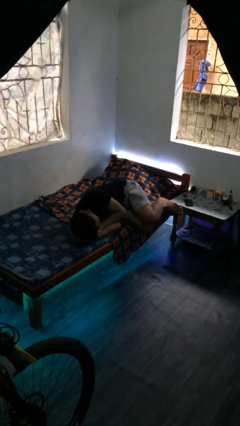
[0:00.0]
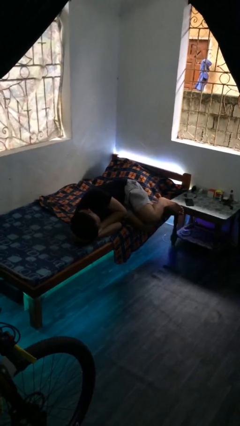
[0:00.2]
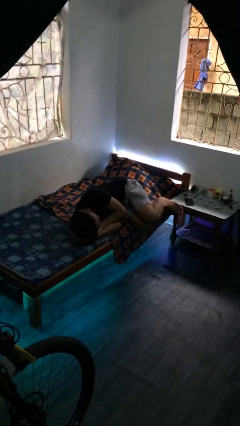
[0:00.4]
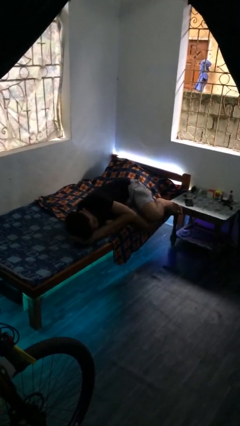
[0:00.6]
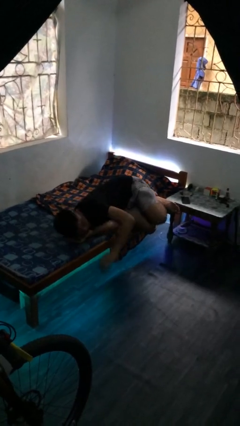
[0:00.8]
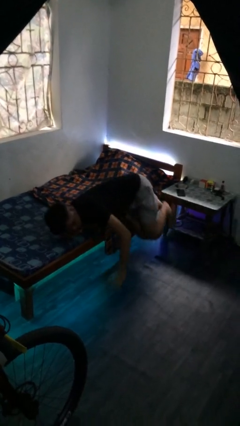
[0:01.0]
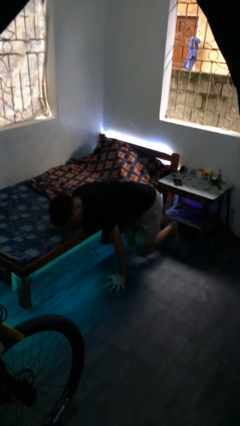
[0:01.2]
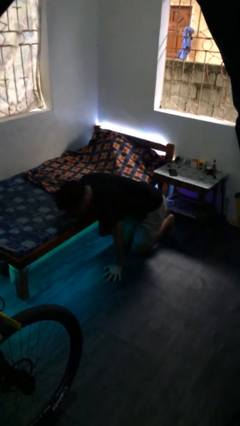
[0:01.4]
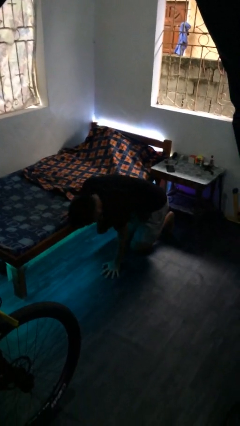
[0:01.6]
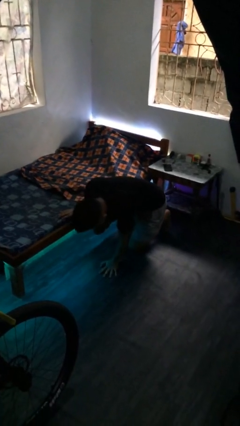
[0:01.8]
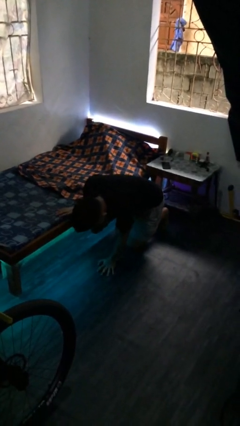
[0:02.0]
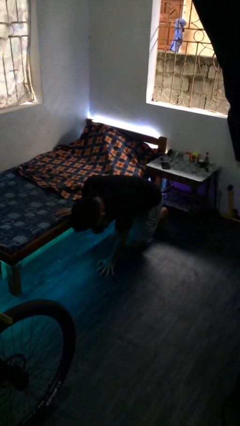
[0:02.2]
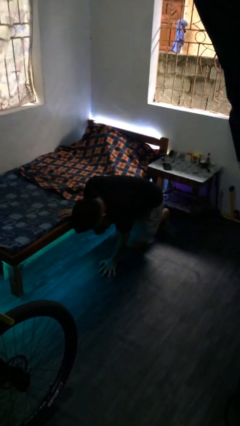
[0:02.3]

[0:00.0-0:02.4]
person falls from bed

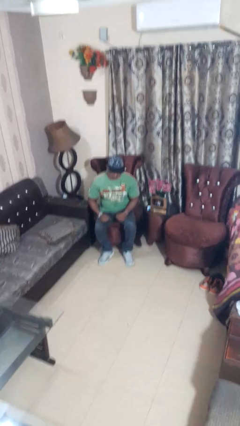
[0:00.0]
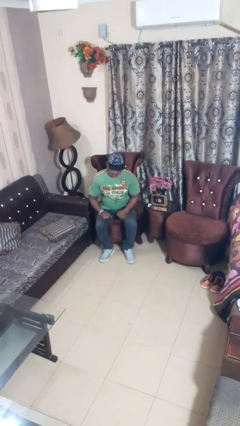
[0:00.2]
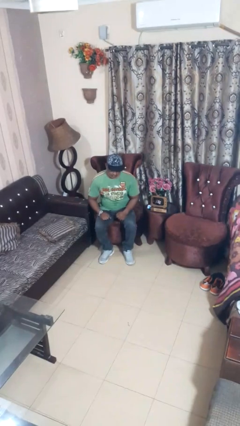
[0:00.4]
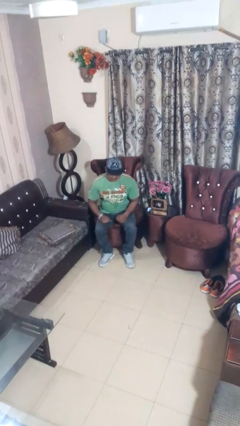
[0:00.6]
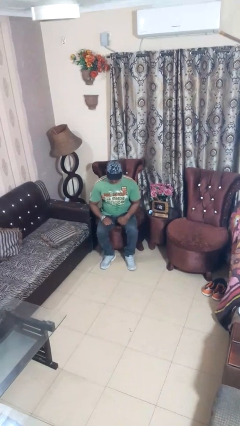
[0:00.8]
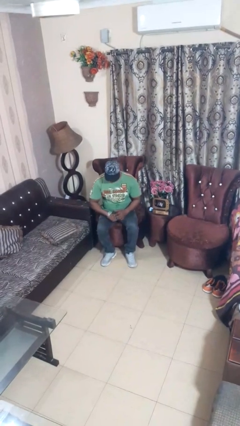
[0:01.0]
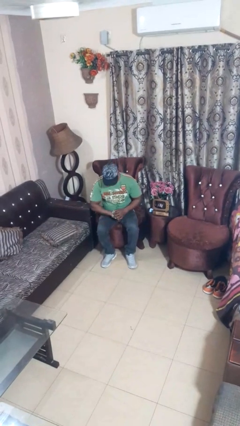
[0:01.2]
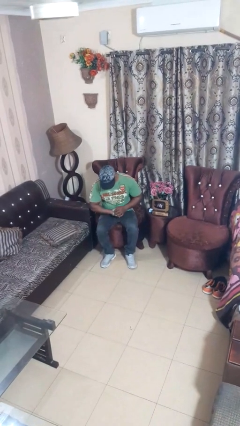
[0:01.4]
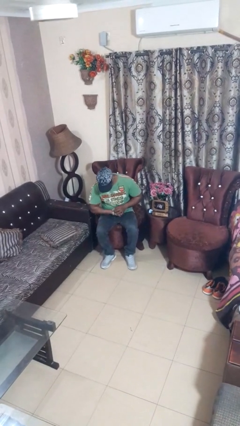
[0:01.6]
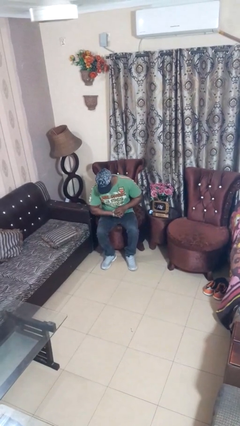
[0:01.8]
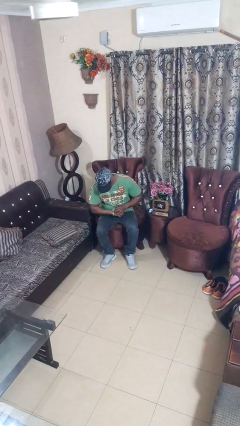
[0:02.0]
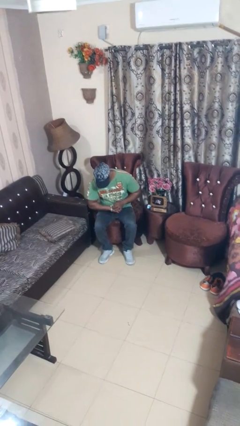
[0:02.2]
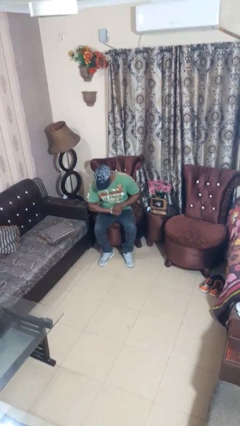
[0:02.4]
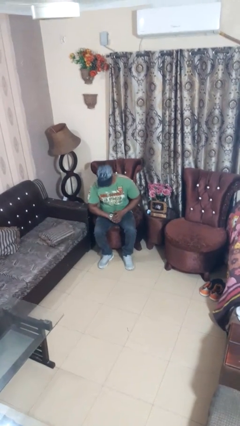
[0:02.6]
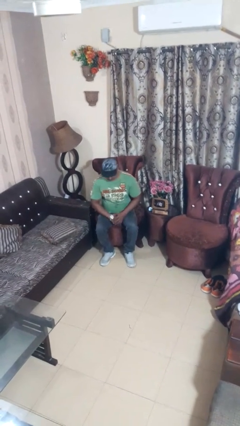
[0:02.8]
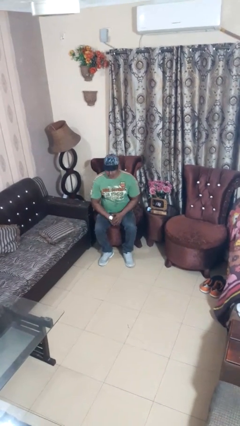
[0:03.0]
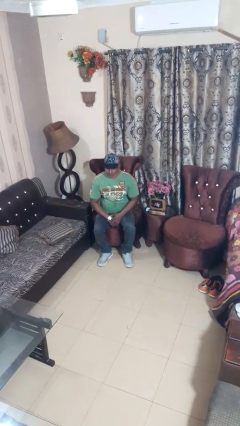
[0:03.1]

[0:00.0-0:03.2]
person looks at wristwatch

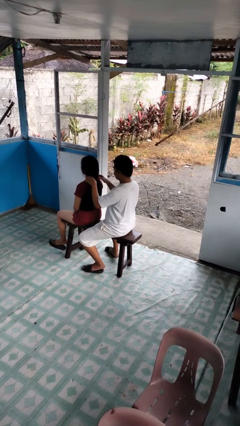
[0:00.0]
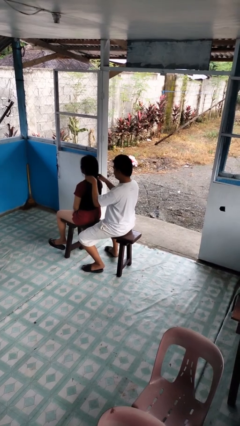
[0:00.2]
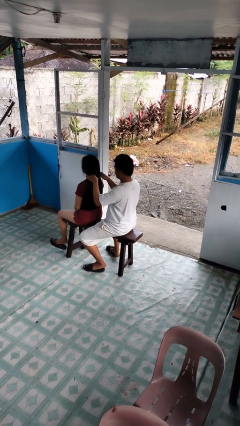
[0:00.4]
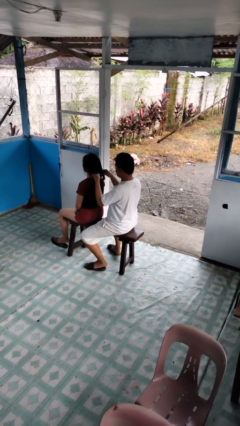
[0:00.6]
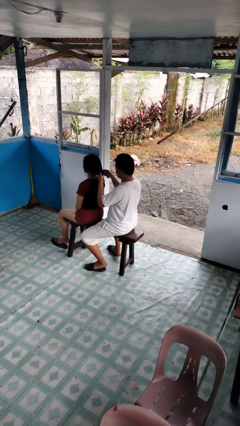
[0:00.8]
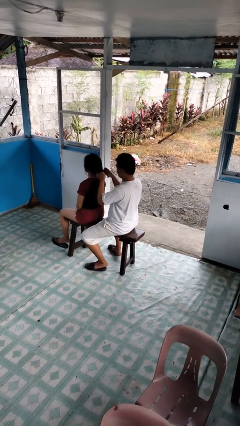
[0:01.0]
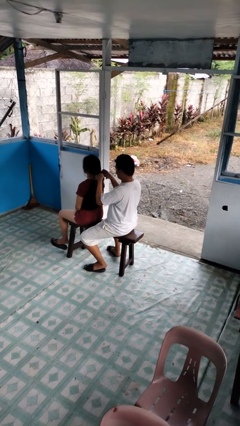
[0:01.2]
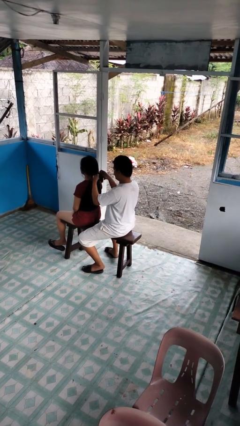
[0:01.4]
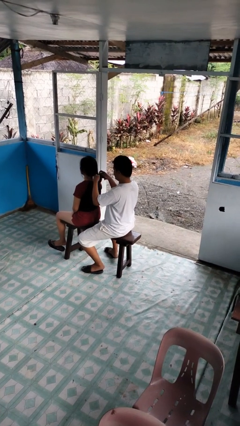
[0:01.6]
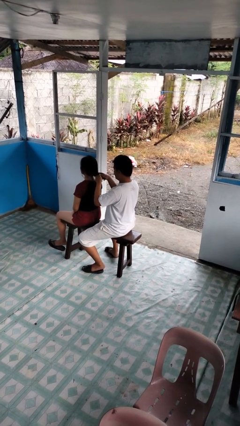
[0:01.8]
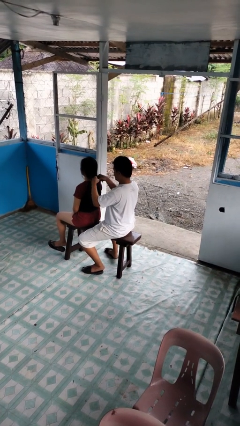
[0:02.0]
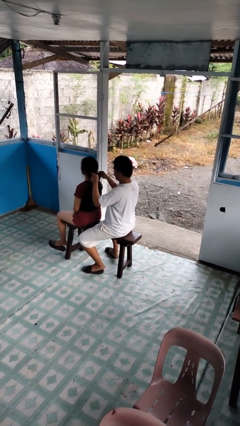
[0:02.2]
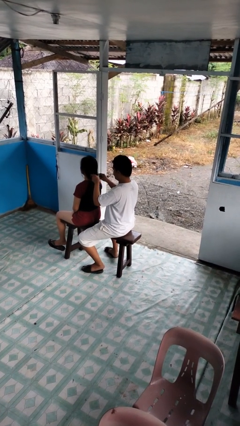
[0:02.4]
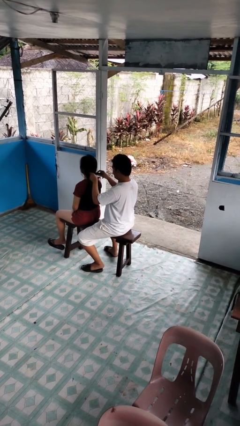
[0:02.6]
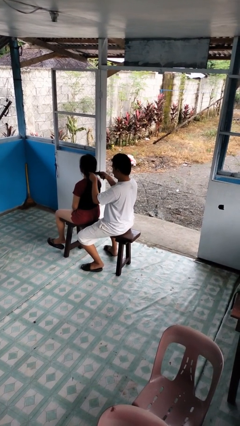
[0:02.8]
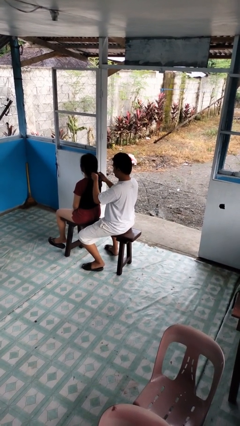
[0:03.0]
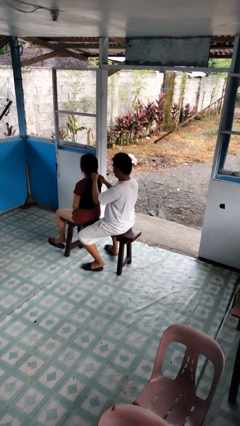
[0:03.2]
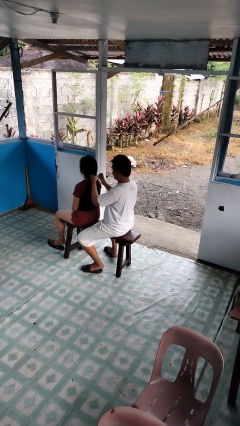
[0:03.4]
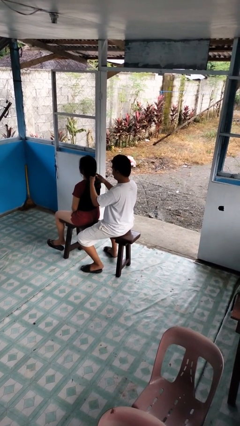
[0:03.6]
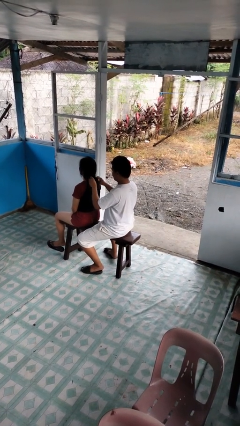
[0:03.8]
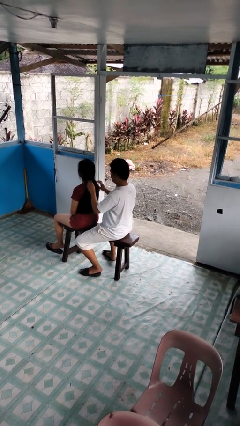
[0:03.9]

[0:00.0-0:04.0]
person braids hair of person

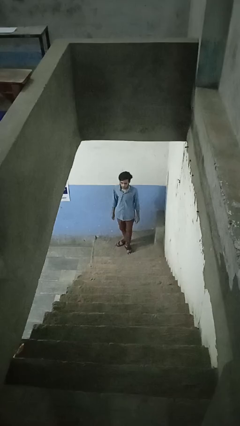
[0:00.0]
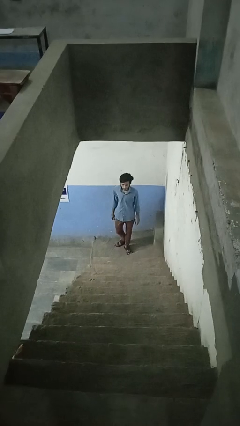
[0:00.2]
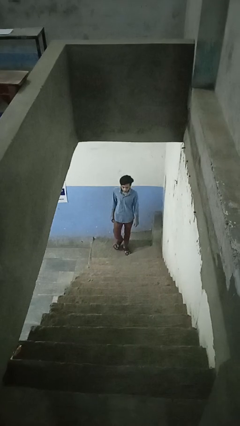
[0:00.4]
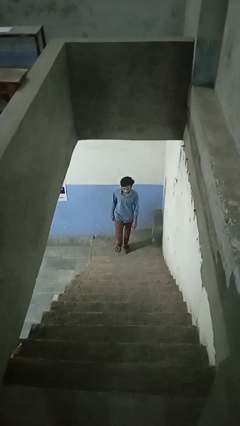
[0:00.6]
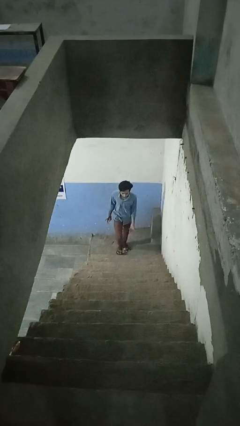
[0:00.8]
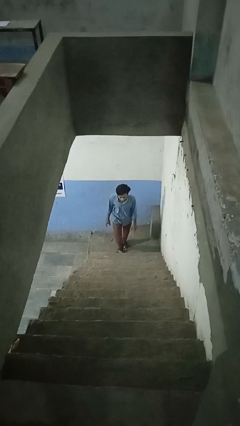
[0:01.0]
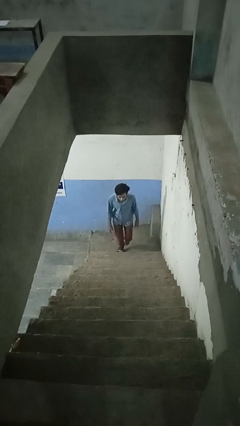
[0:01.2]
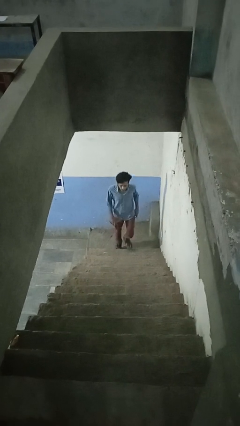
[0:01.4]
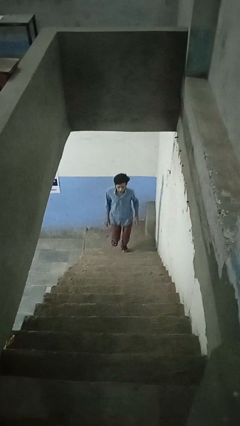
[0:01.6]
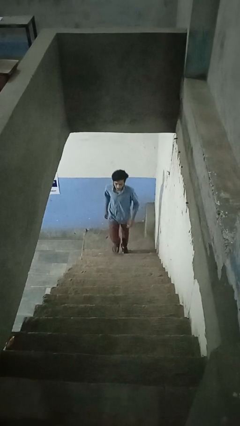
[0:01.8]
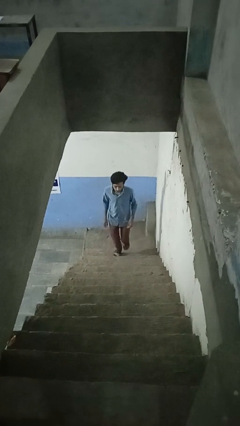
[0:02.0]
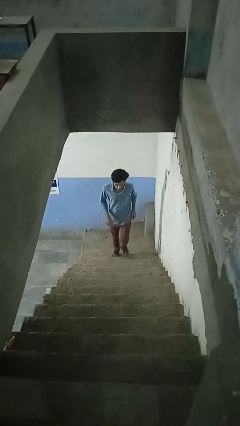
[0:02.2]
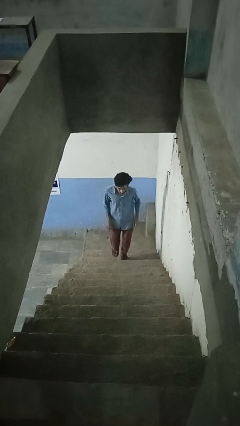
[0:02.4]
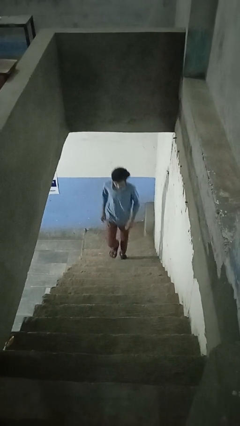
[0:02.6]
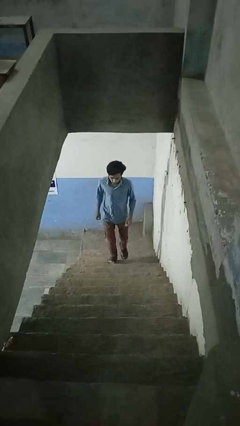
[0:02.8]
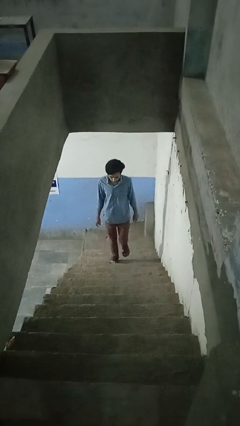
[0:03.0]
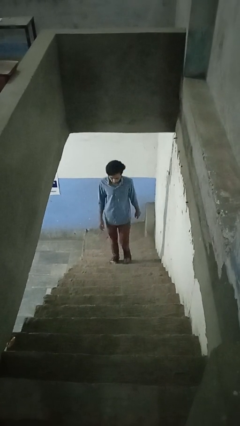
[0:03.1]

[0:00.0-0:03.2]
person climbs up stairs

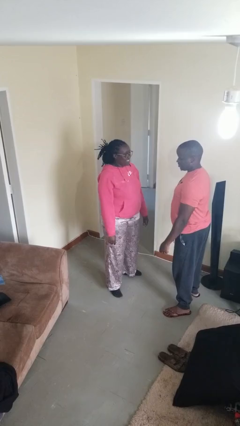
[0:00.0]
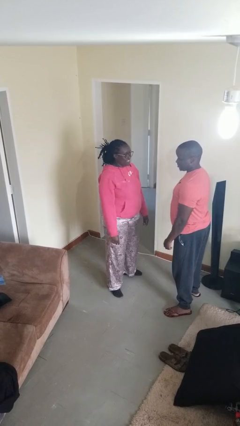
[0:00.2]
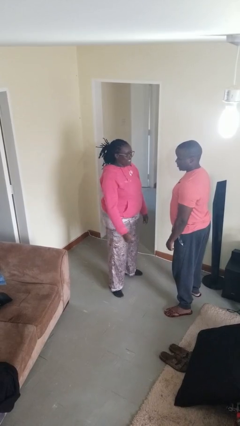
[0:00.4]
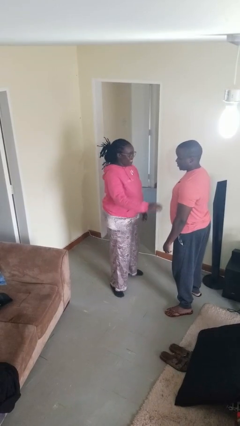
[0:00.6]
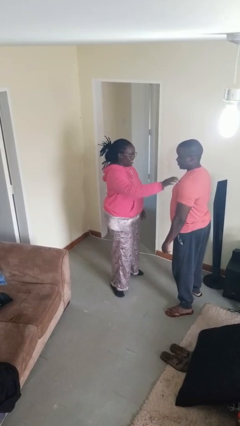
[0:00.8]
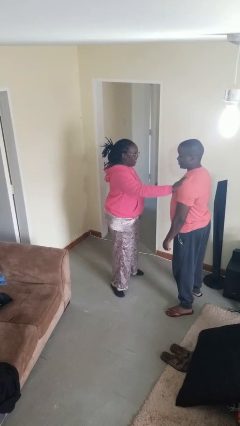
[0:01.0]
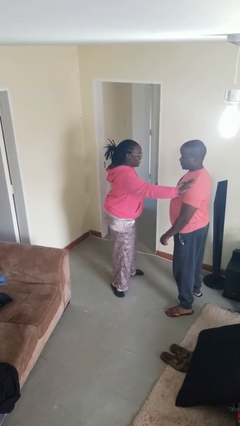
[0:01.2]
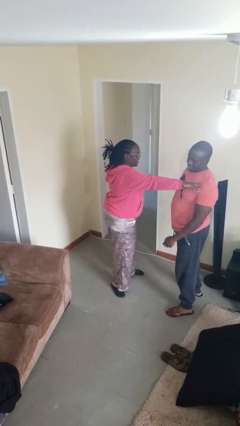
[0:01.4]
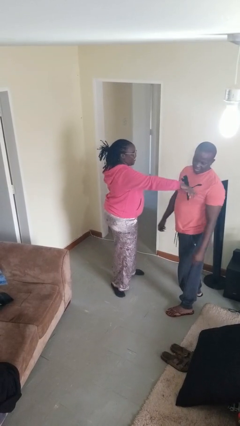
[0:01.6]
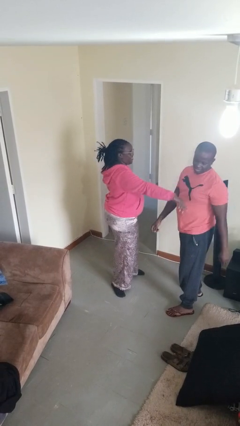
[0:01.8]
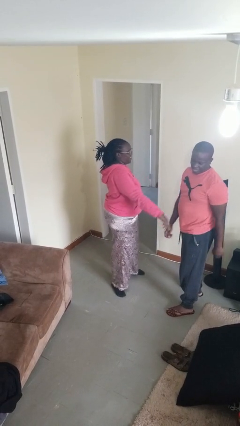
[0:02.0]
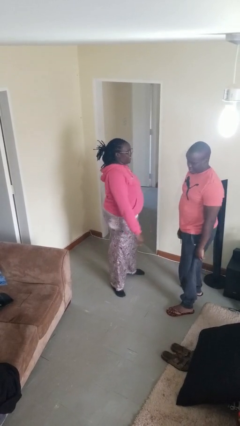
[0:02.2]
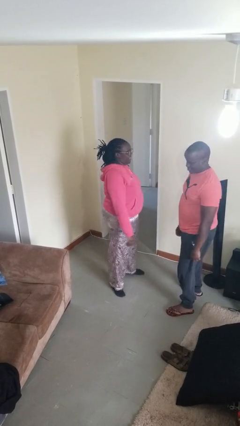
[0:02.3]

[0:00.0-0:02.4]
person shoves person

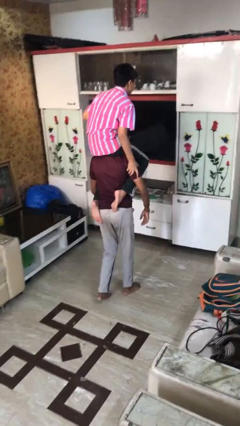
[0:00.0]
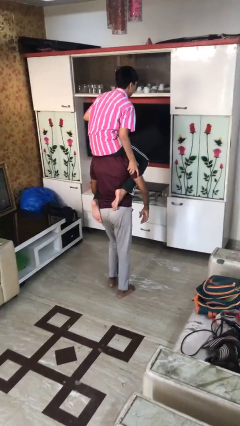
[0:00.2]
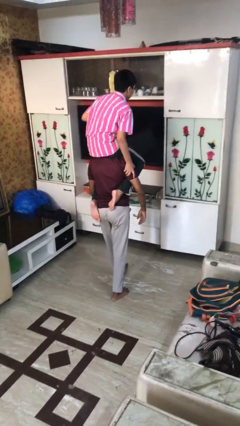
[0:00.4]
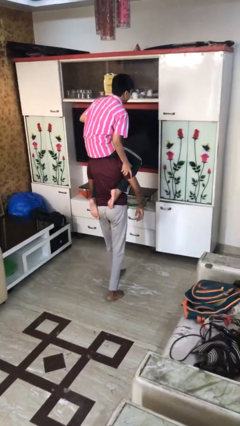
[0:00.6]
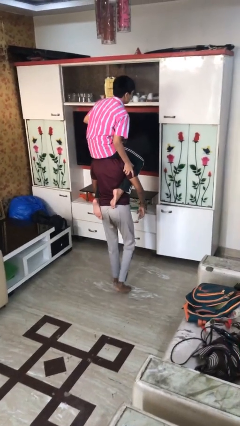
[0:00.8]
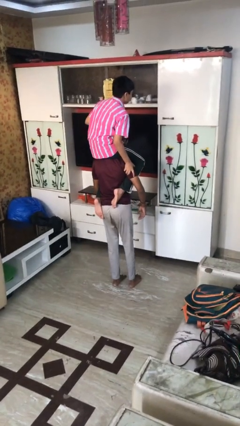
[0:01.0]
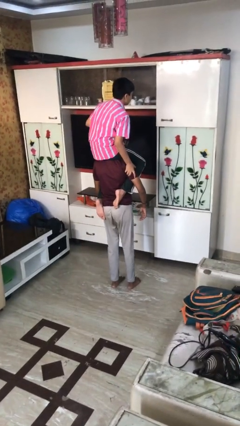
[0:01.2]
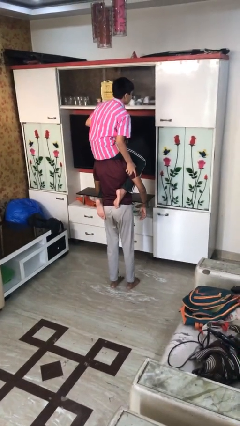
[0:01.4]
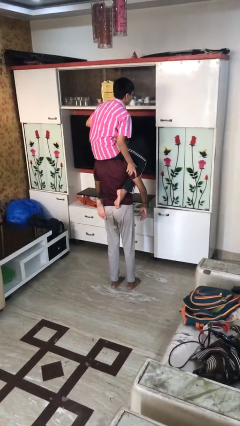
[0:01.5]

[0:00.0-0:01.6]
person carries person on shoulders

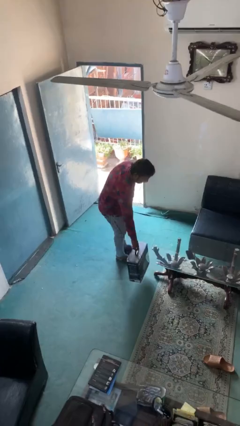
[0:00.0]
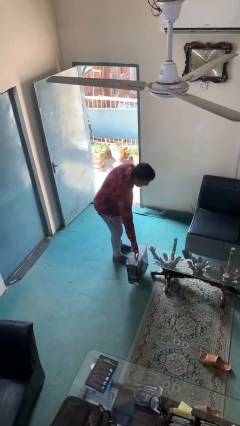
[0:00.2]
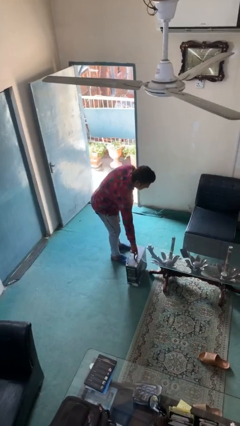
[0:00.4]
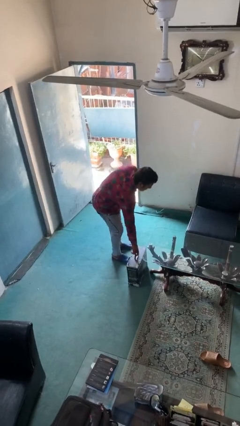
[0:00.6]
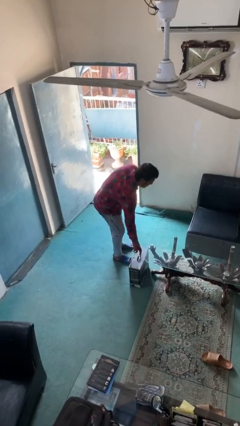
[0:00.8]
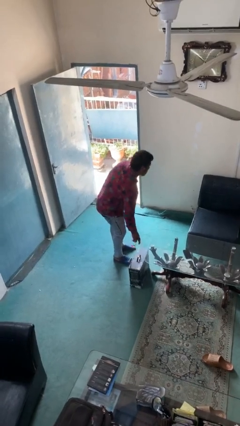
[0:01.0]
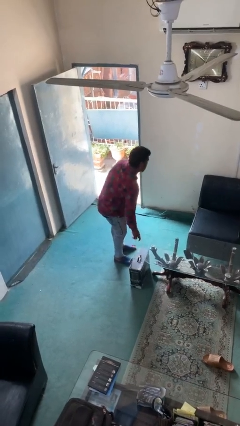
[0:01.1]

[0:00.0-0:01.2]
person puts down object on floor
